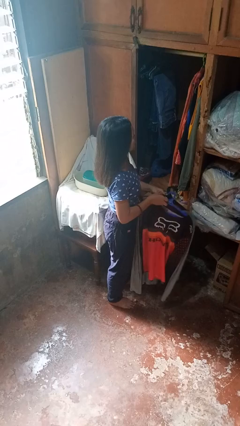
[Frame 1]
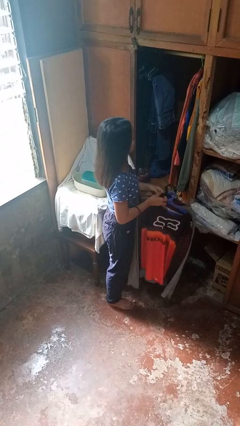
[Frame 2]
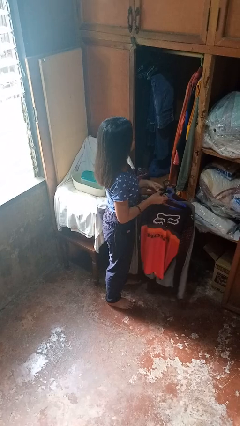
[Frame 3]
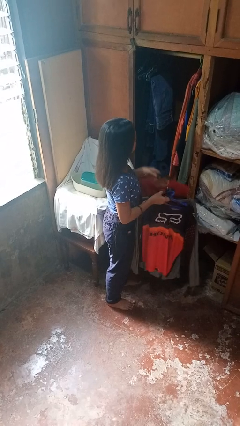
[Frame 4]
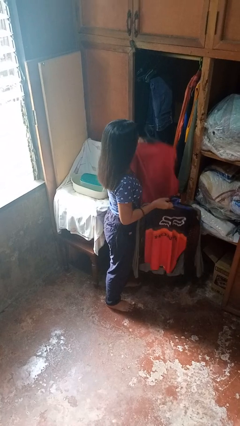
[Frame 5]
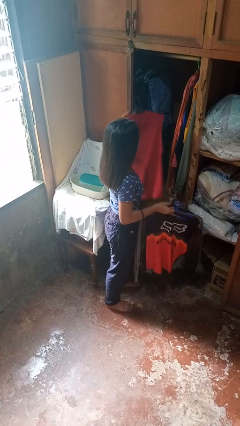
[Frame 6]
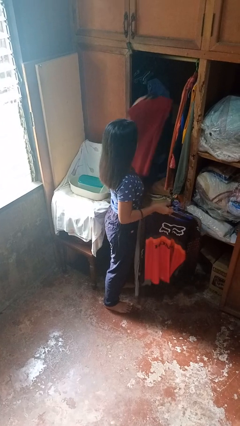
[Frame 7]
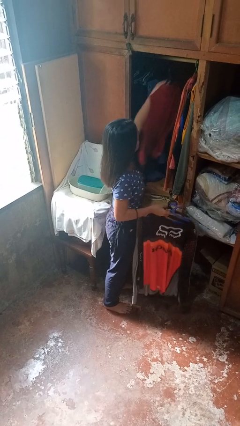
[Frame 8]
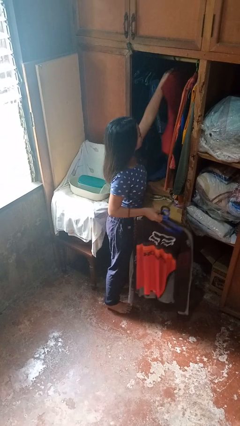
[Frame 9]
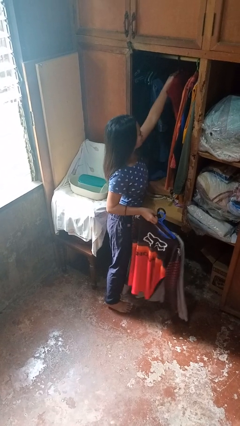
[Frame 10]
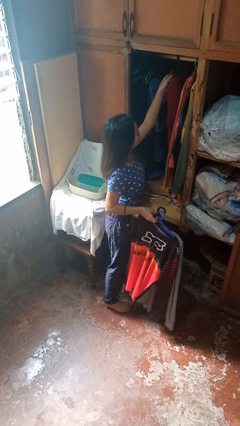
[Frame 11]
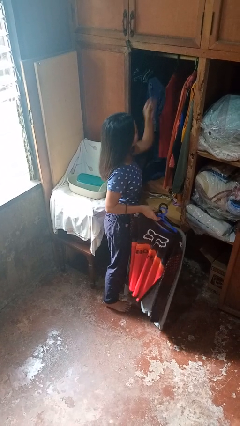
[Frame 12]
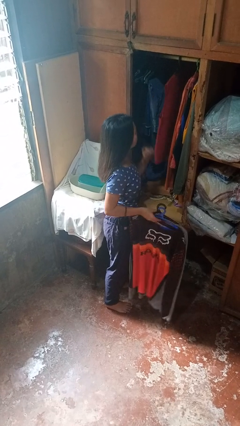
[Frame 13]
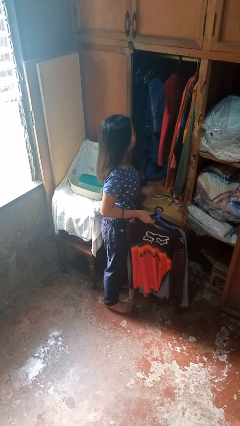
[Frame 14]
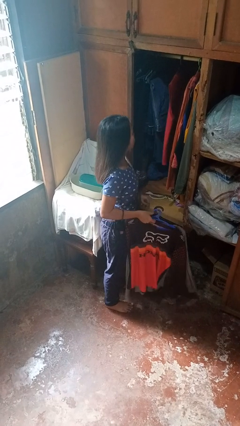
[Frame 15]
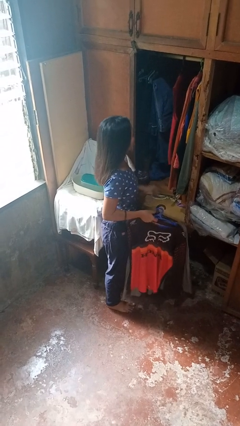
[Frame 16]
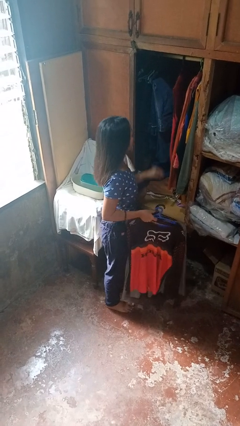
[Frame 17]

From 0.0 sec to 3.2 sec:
person puts clothes into closet

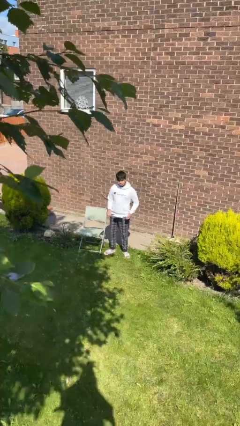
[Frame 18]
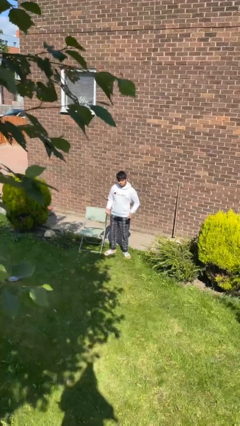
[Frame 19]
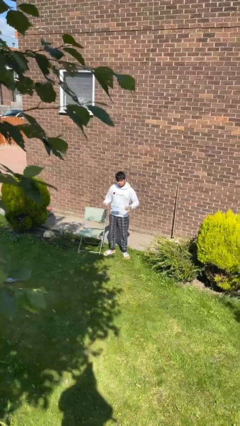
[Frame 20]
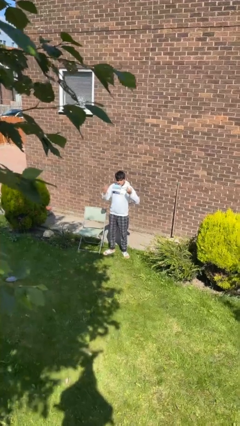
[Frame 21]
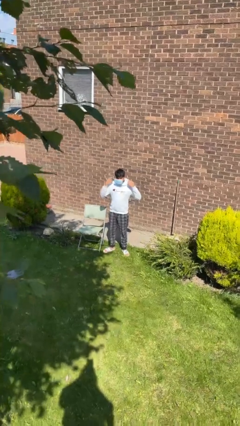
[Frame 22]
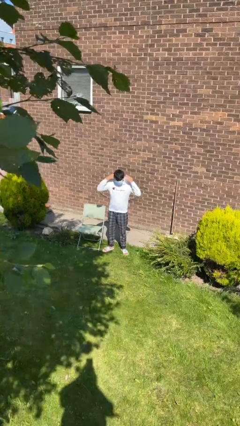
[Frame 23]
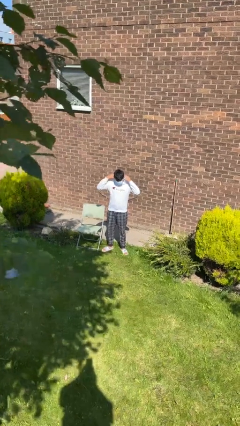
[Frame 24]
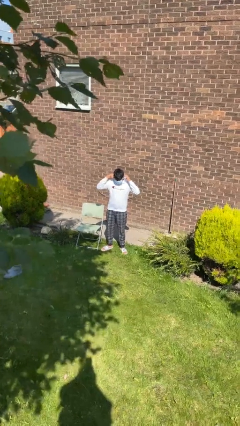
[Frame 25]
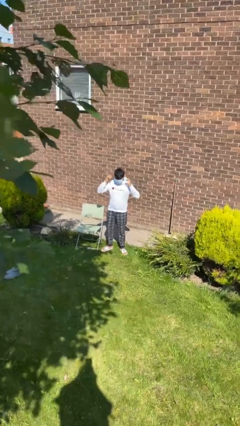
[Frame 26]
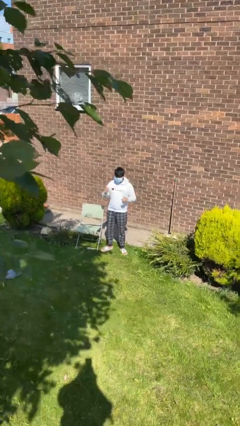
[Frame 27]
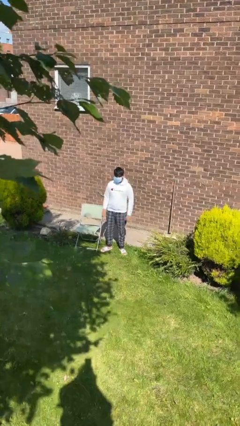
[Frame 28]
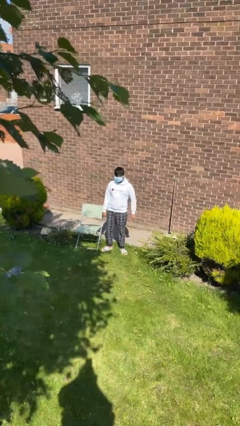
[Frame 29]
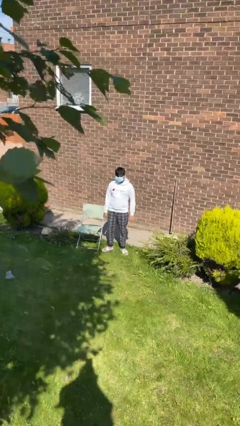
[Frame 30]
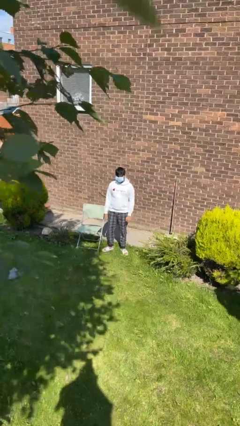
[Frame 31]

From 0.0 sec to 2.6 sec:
person puts on facemask

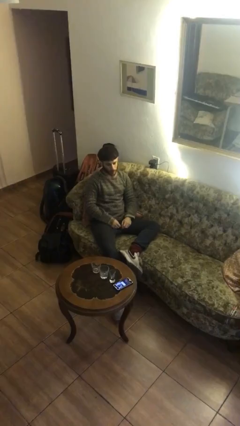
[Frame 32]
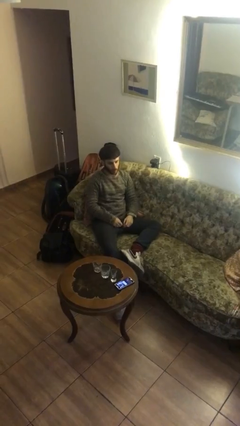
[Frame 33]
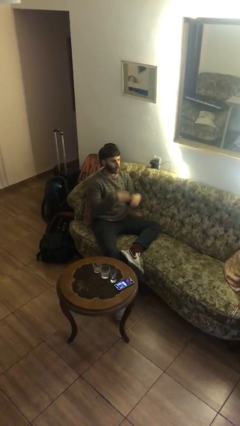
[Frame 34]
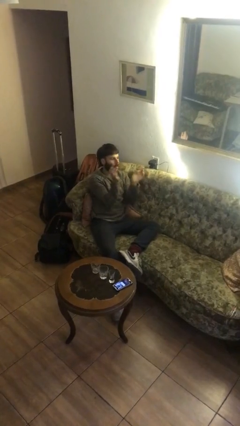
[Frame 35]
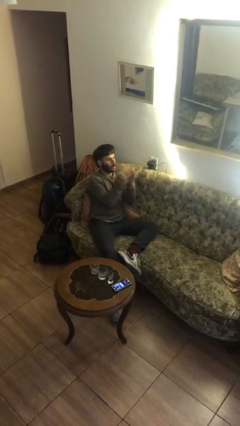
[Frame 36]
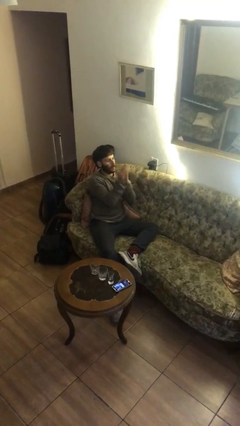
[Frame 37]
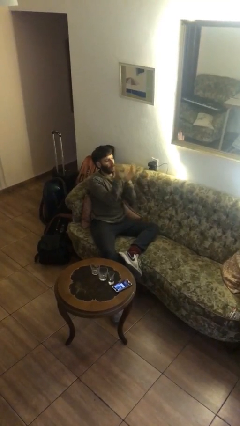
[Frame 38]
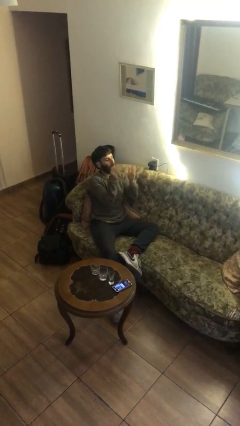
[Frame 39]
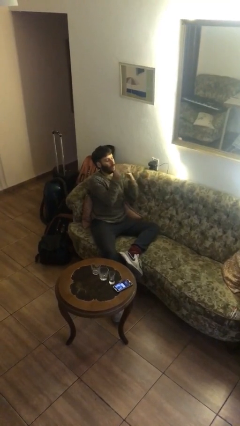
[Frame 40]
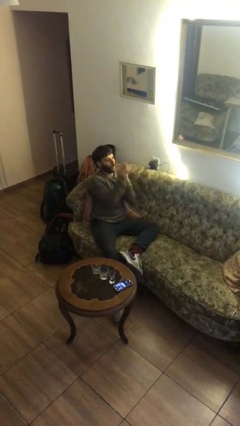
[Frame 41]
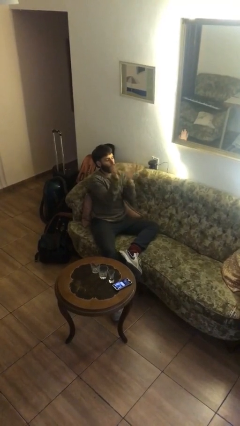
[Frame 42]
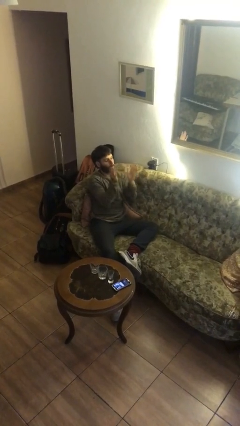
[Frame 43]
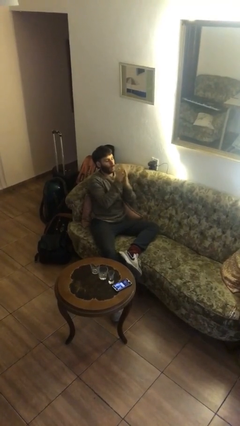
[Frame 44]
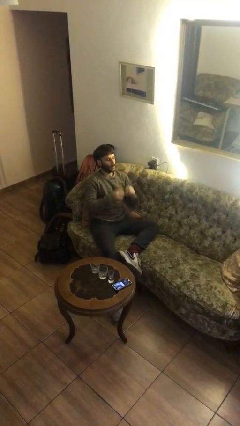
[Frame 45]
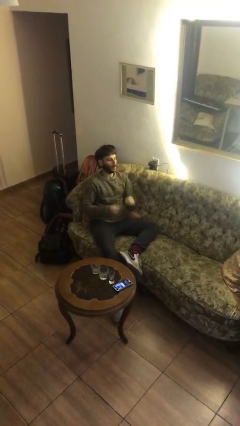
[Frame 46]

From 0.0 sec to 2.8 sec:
person claps hands

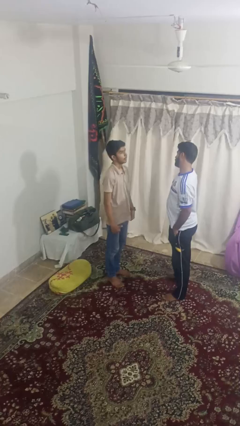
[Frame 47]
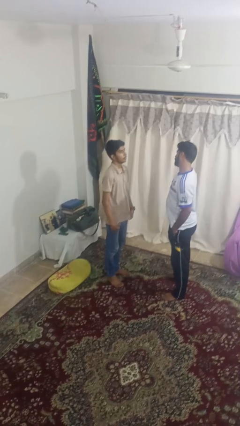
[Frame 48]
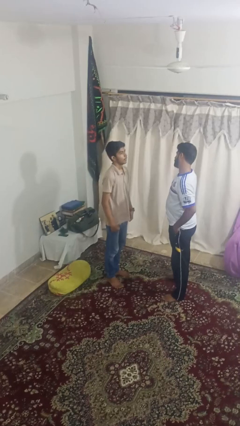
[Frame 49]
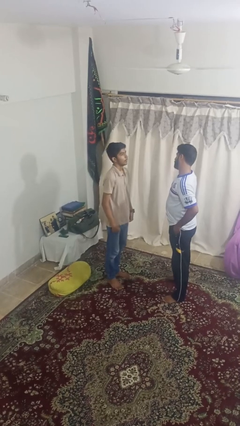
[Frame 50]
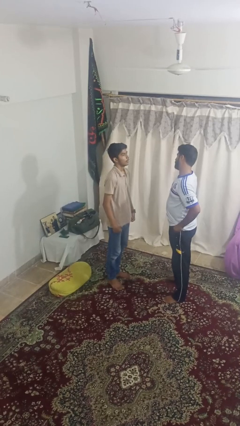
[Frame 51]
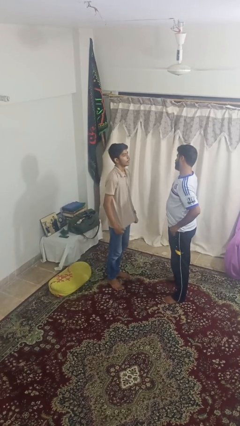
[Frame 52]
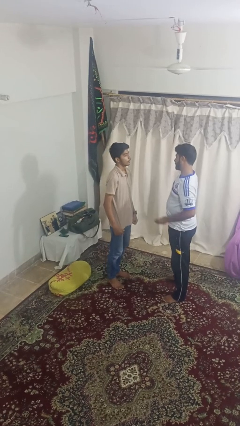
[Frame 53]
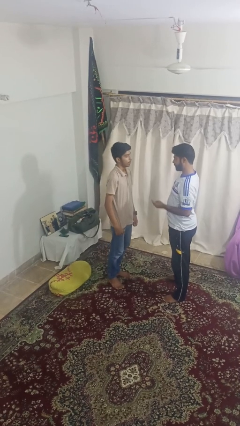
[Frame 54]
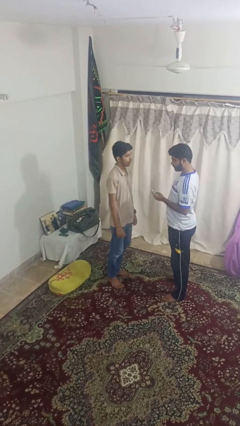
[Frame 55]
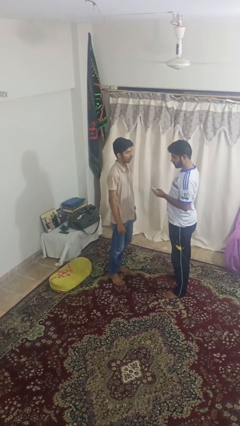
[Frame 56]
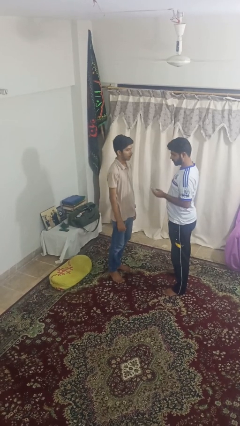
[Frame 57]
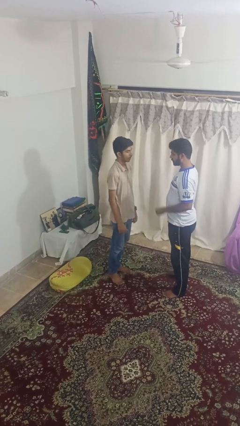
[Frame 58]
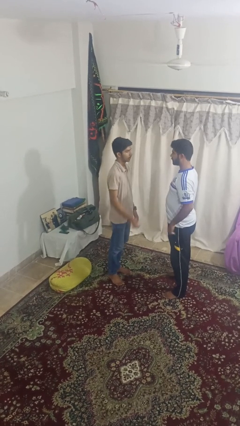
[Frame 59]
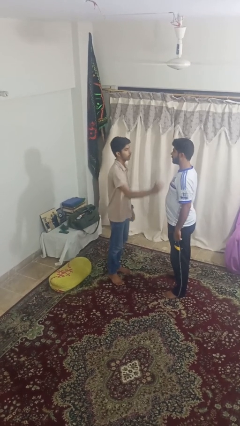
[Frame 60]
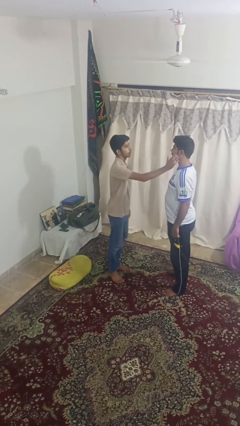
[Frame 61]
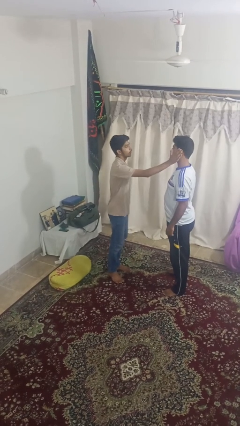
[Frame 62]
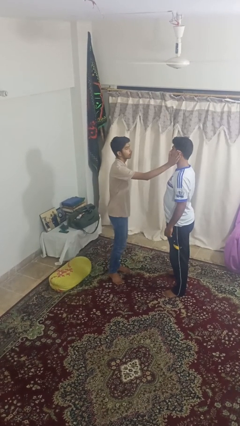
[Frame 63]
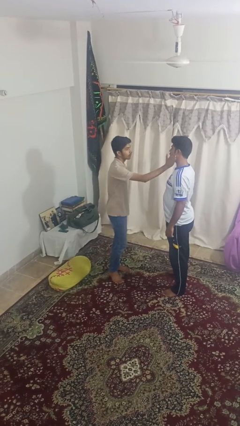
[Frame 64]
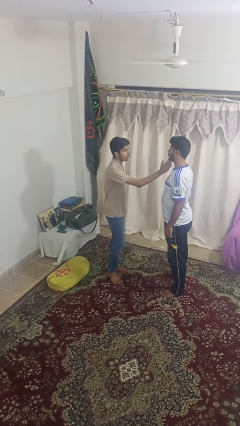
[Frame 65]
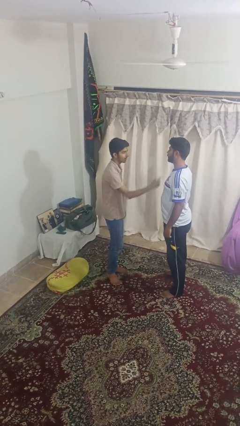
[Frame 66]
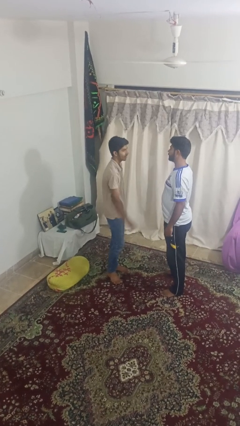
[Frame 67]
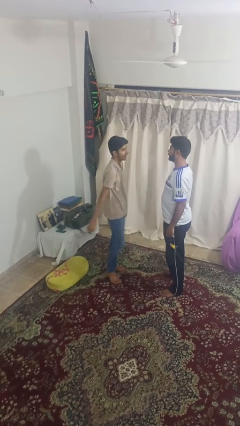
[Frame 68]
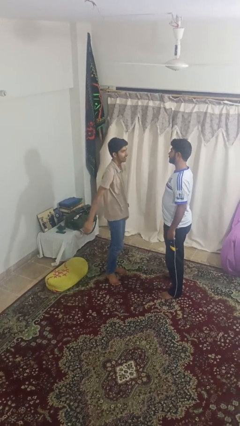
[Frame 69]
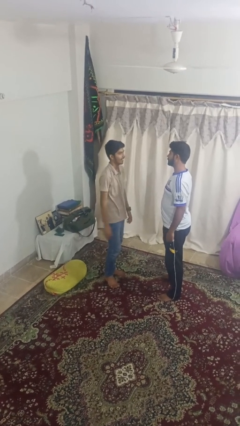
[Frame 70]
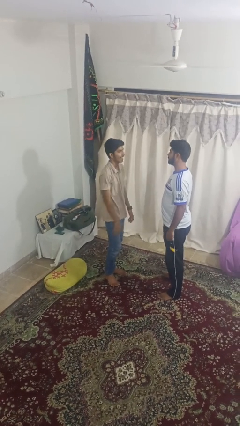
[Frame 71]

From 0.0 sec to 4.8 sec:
person touches face of person

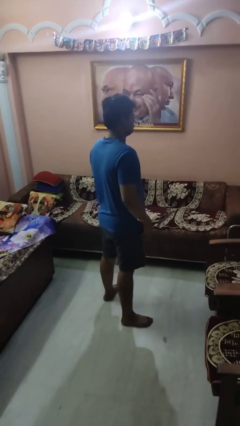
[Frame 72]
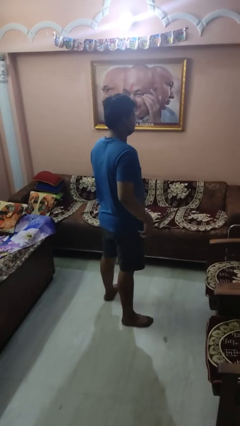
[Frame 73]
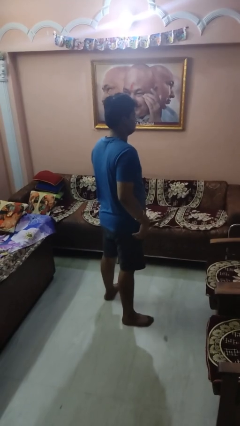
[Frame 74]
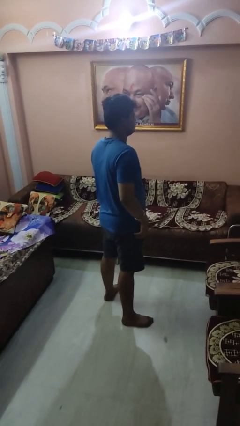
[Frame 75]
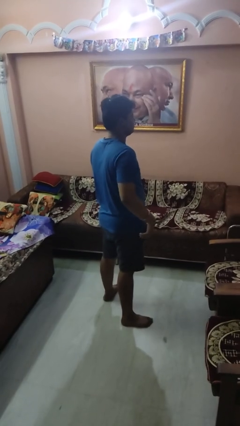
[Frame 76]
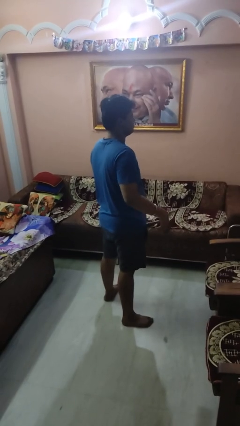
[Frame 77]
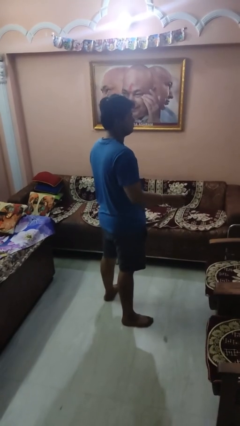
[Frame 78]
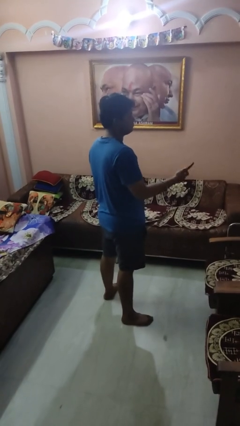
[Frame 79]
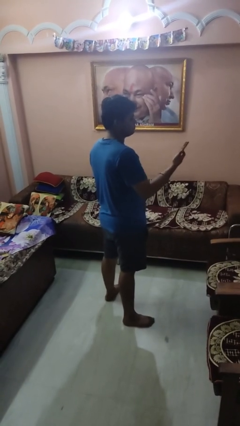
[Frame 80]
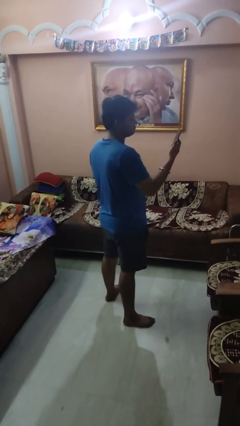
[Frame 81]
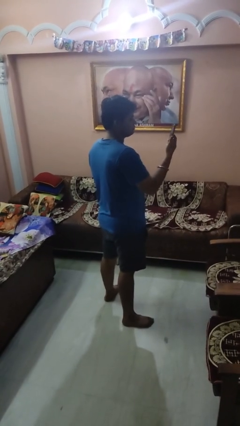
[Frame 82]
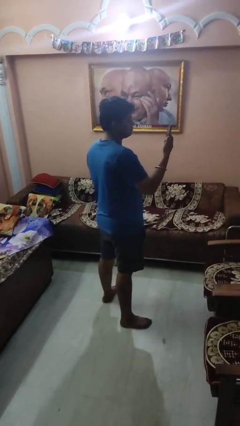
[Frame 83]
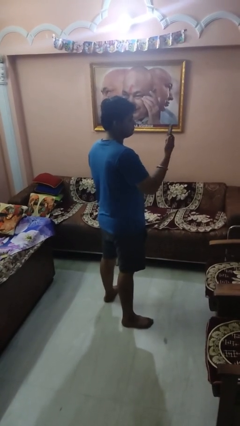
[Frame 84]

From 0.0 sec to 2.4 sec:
person takes phone from pocket

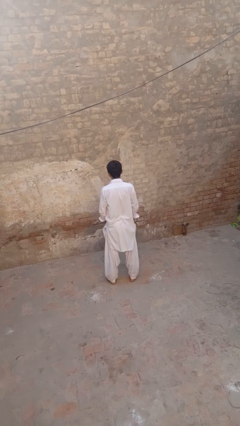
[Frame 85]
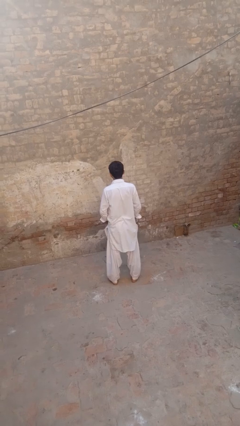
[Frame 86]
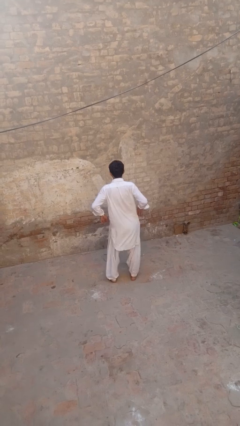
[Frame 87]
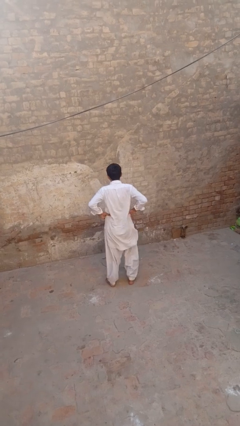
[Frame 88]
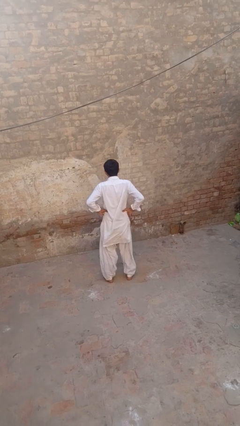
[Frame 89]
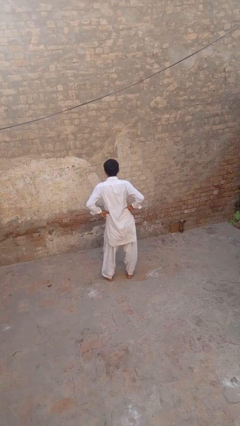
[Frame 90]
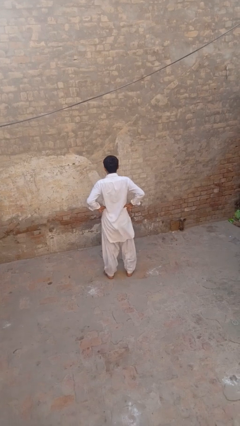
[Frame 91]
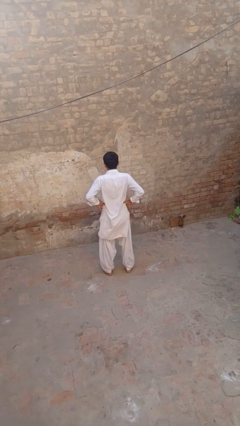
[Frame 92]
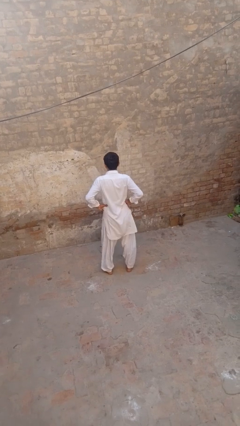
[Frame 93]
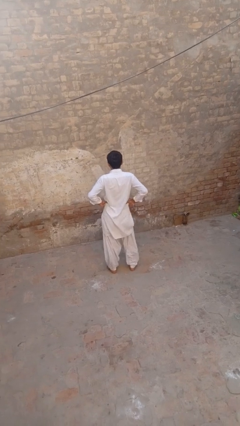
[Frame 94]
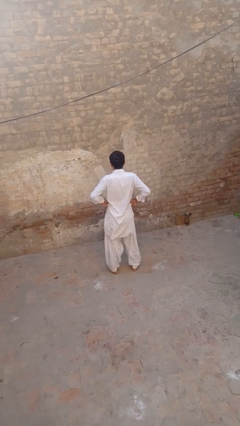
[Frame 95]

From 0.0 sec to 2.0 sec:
person wiggles hips
